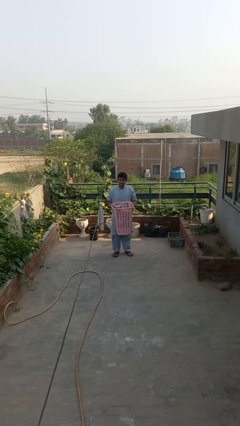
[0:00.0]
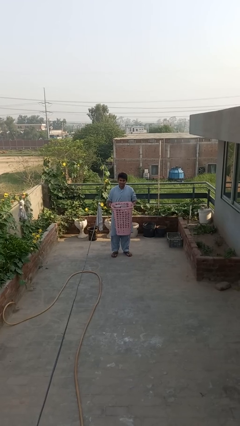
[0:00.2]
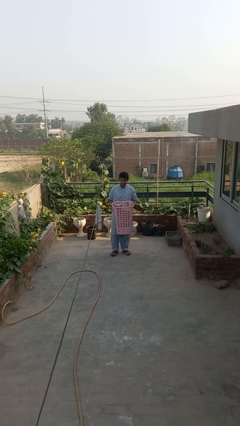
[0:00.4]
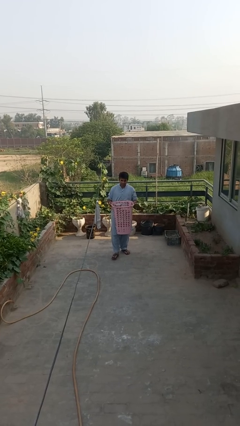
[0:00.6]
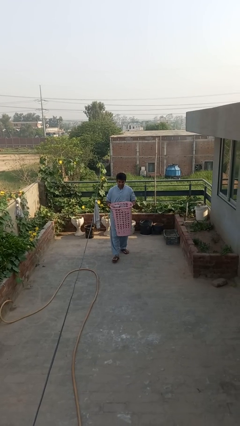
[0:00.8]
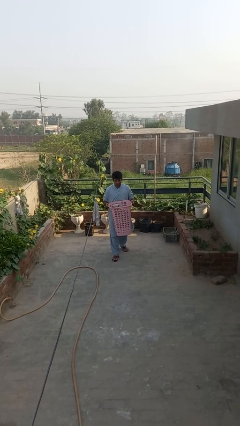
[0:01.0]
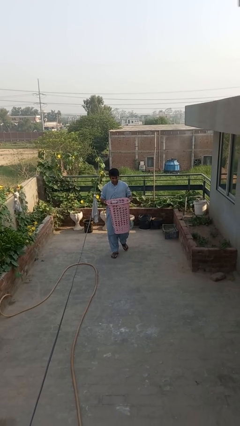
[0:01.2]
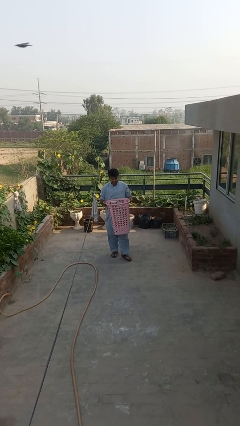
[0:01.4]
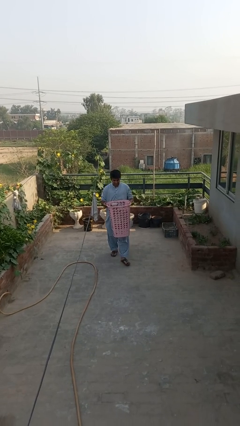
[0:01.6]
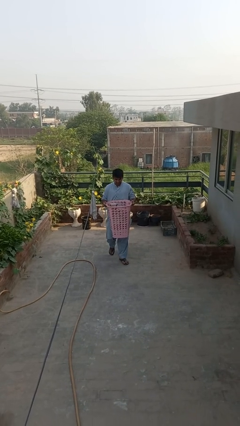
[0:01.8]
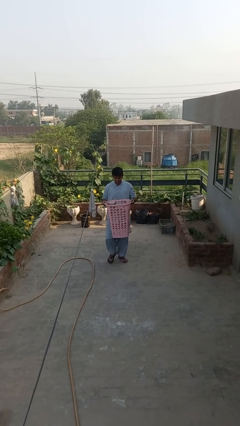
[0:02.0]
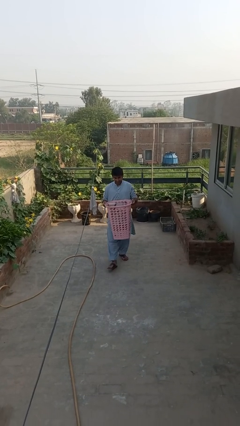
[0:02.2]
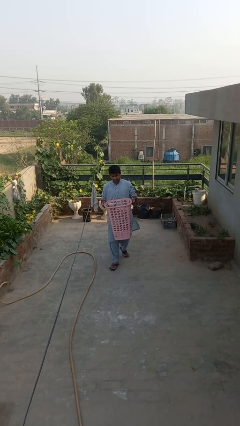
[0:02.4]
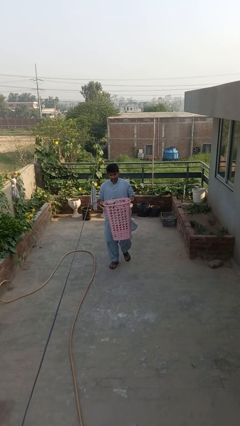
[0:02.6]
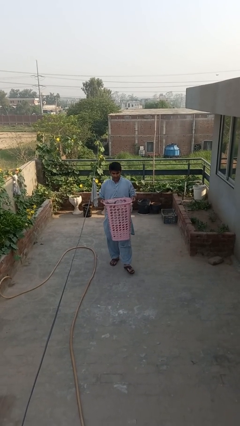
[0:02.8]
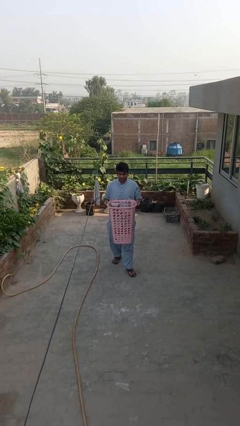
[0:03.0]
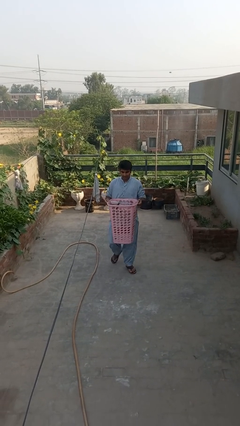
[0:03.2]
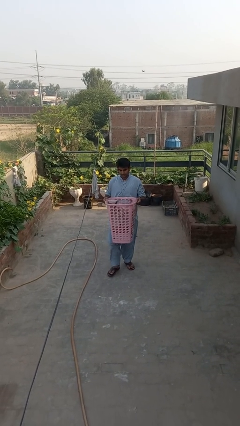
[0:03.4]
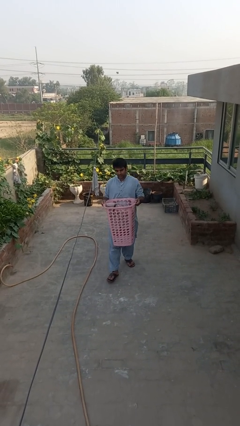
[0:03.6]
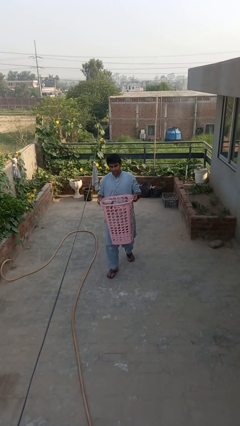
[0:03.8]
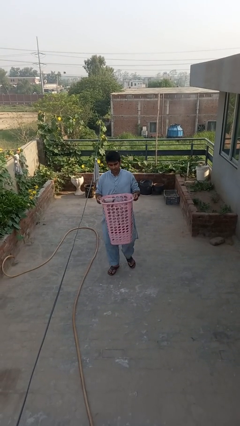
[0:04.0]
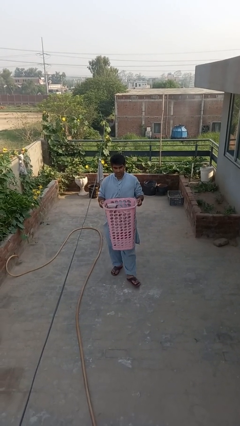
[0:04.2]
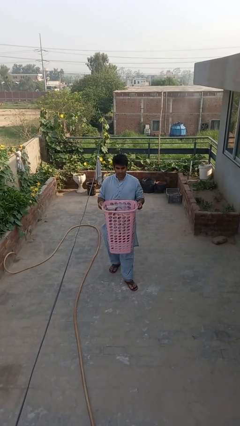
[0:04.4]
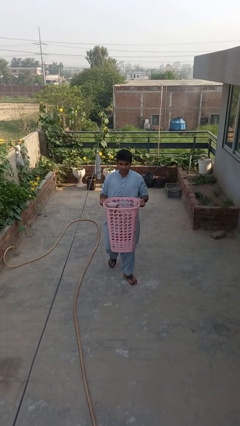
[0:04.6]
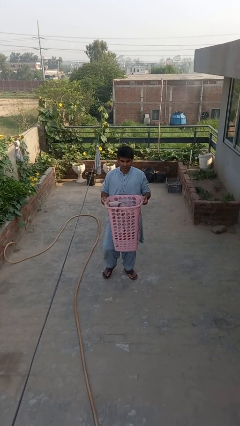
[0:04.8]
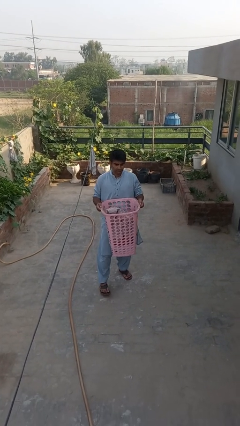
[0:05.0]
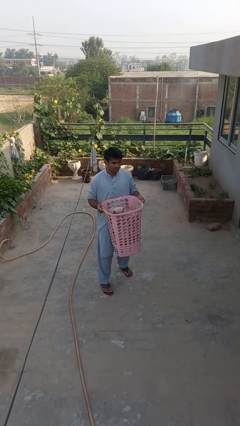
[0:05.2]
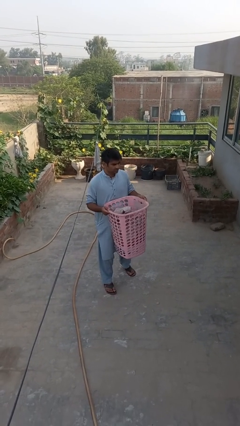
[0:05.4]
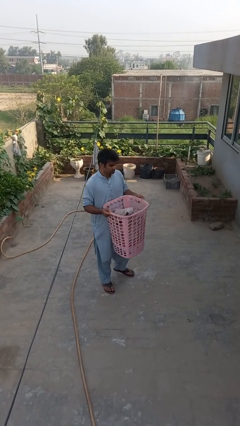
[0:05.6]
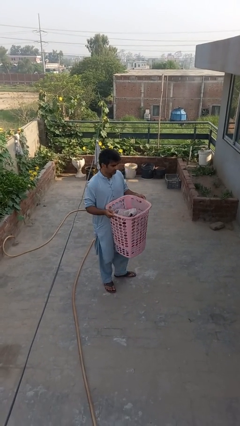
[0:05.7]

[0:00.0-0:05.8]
person carries laundry basket

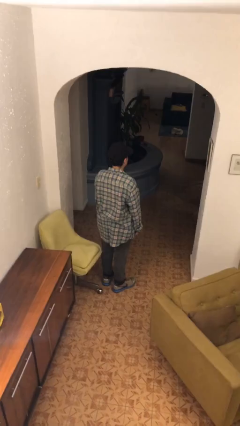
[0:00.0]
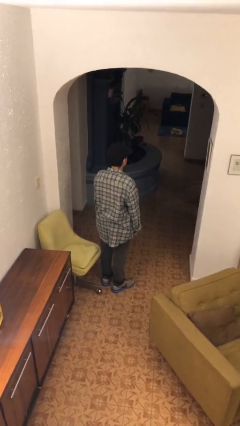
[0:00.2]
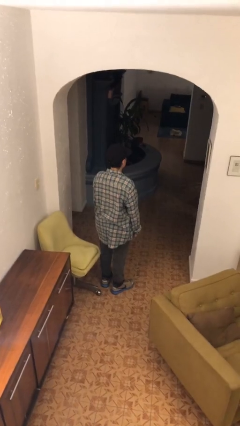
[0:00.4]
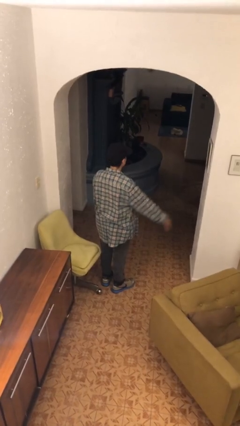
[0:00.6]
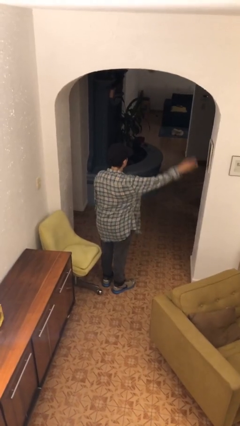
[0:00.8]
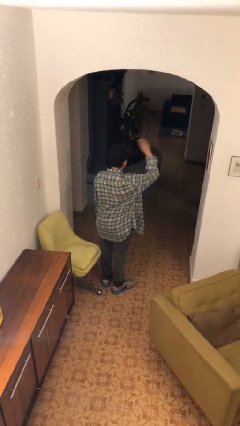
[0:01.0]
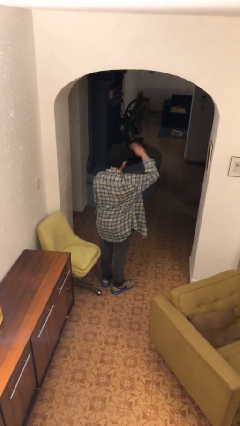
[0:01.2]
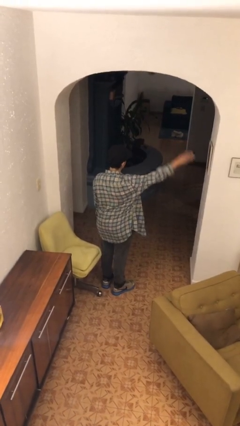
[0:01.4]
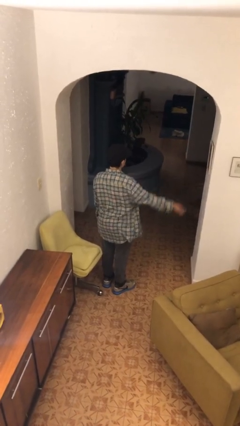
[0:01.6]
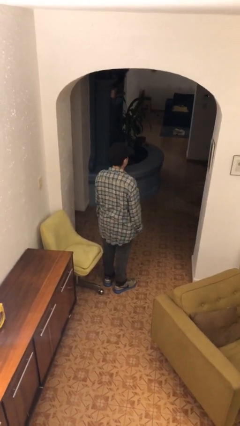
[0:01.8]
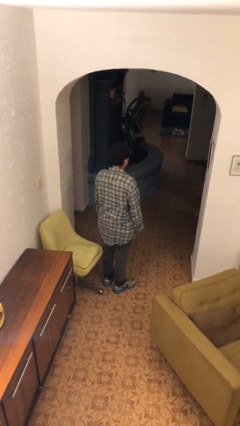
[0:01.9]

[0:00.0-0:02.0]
person salutes

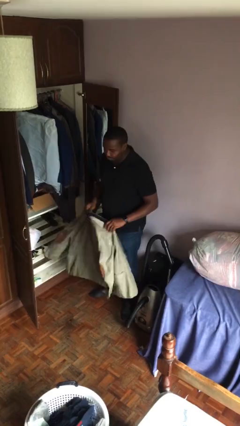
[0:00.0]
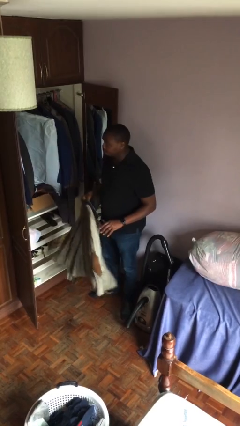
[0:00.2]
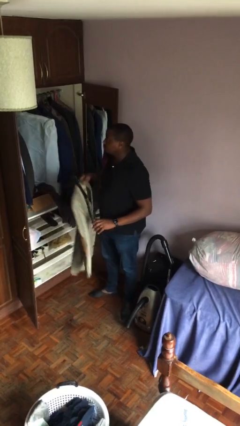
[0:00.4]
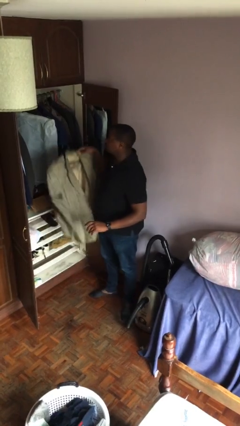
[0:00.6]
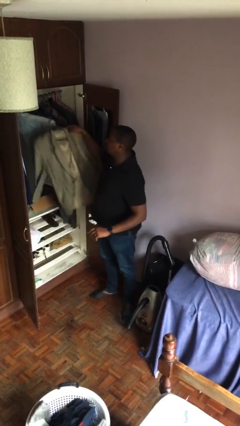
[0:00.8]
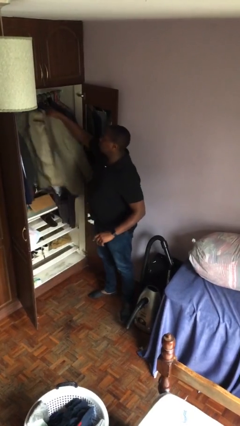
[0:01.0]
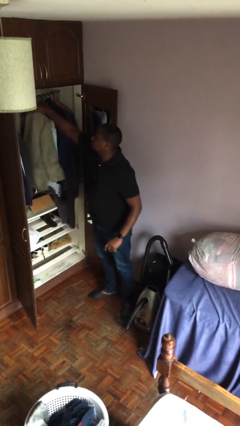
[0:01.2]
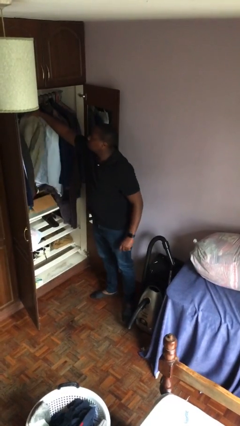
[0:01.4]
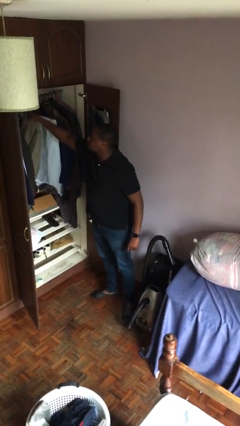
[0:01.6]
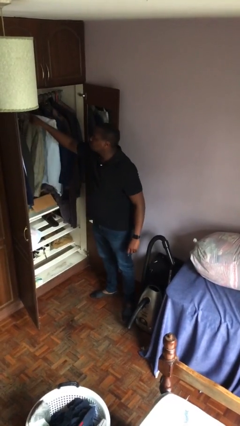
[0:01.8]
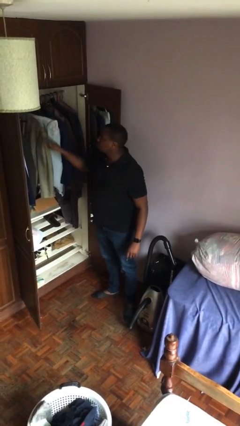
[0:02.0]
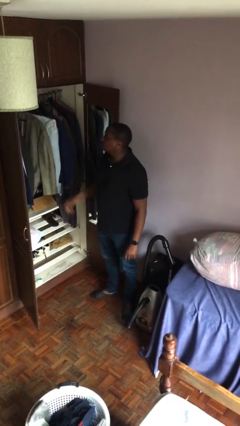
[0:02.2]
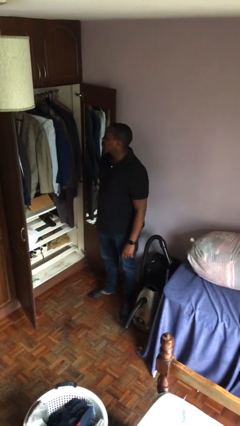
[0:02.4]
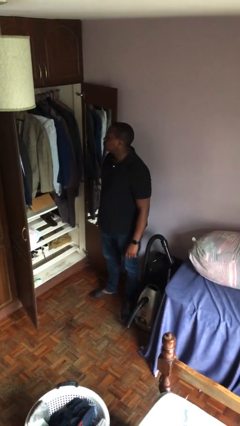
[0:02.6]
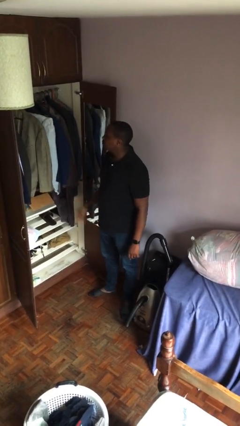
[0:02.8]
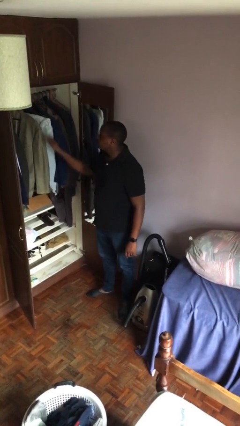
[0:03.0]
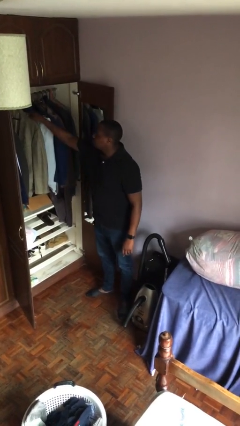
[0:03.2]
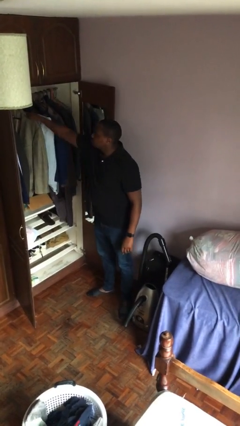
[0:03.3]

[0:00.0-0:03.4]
person puts clothes into closet

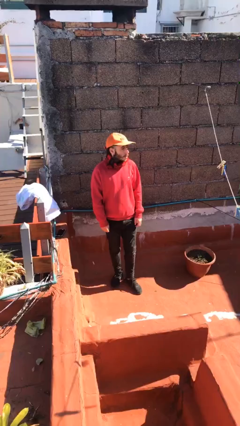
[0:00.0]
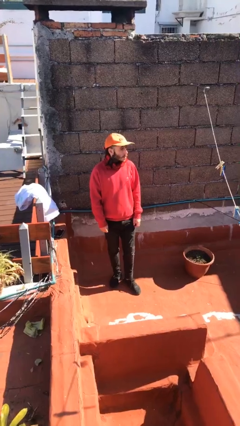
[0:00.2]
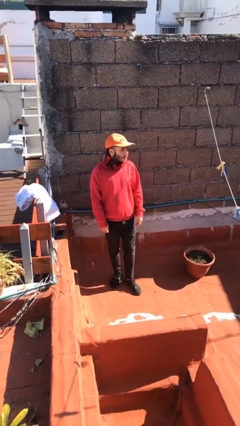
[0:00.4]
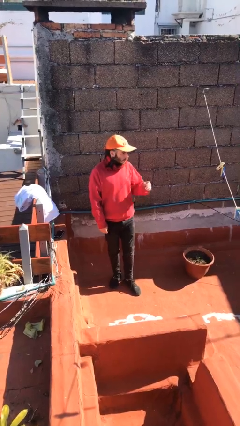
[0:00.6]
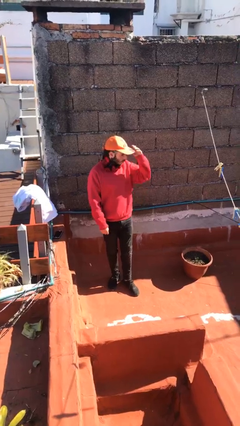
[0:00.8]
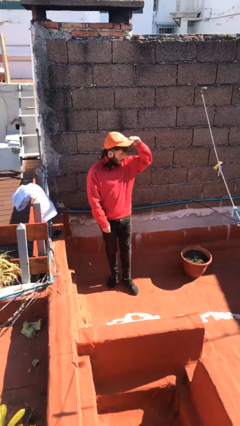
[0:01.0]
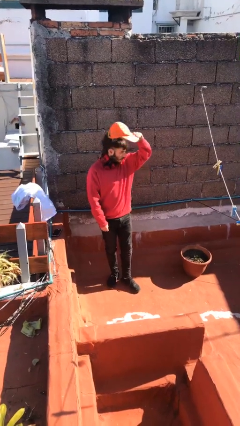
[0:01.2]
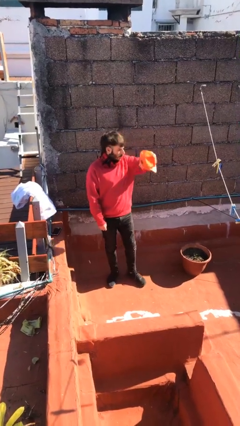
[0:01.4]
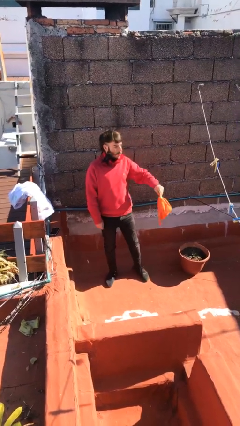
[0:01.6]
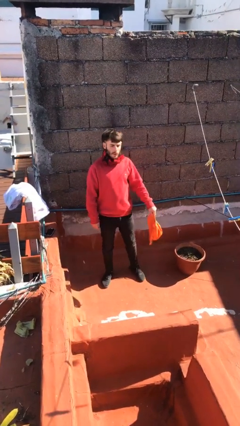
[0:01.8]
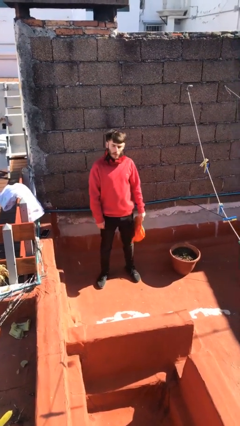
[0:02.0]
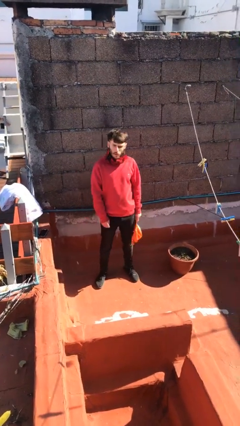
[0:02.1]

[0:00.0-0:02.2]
person takes off hat

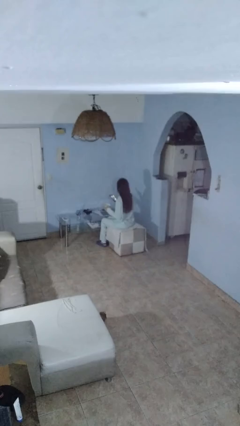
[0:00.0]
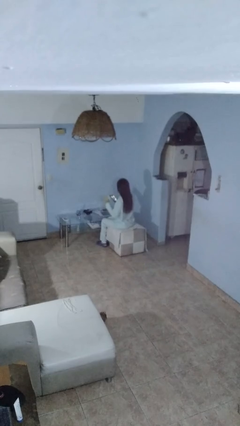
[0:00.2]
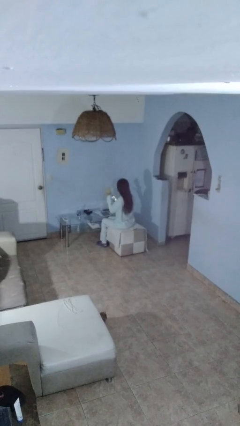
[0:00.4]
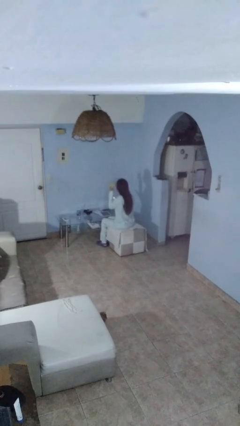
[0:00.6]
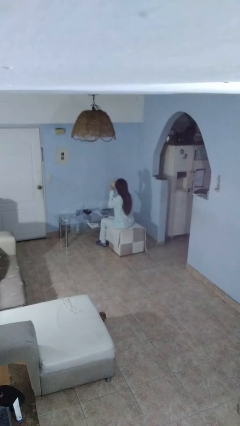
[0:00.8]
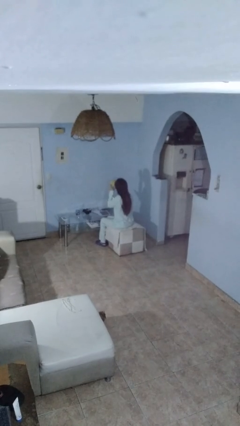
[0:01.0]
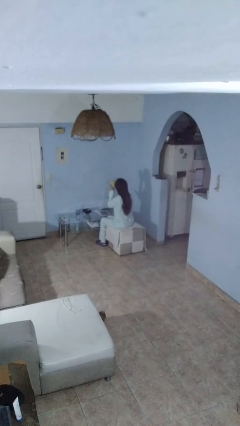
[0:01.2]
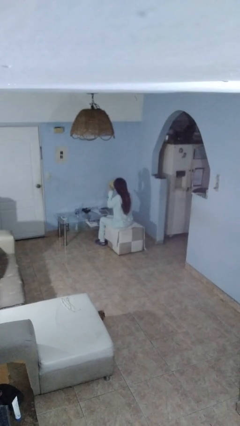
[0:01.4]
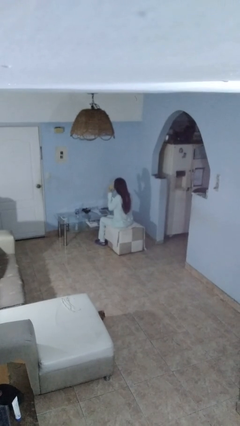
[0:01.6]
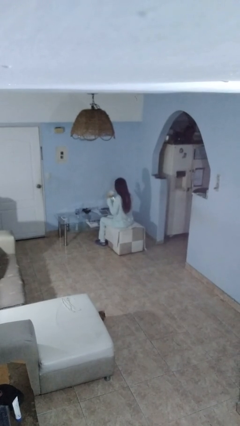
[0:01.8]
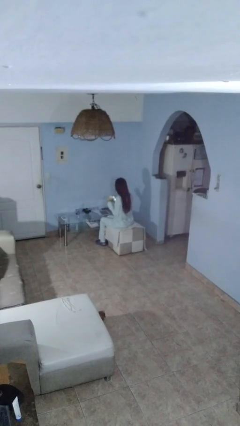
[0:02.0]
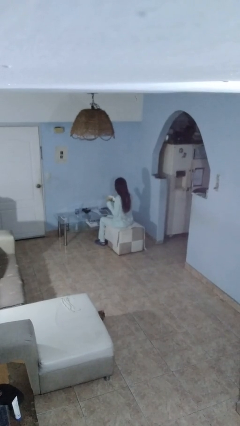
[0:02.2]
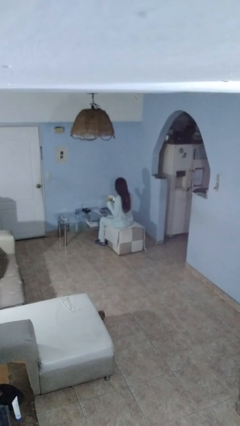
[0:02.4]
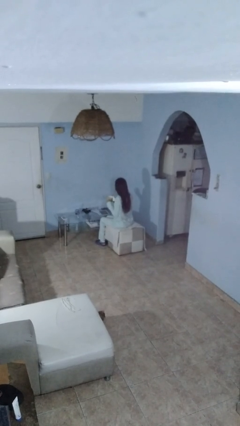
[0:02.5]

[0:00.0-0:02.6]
person drinks from mug

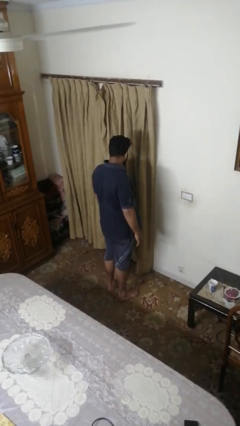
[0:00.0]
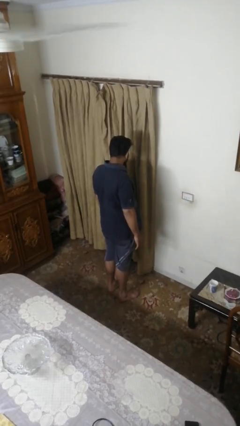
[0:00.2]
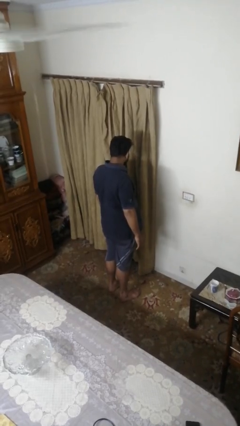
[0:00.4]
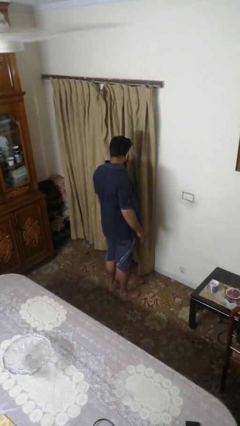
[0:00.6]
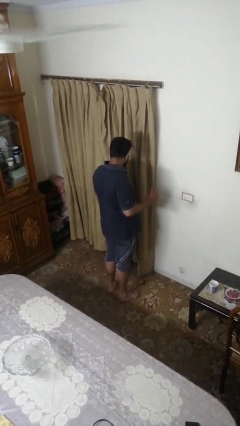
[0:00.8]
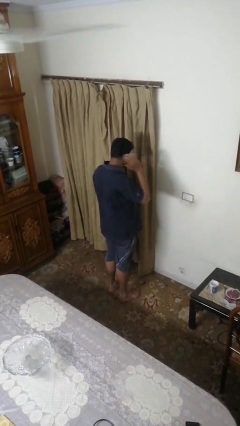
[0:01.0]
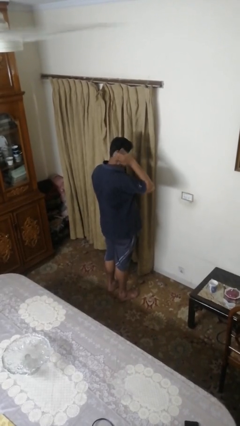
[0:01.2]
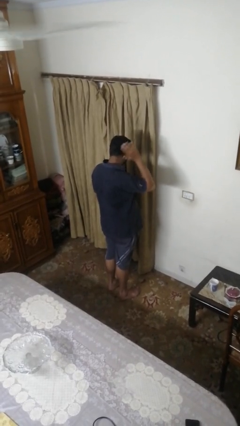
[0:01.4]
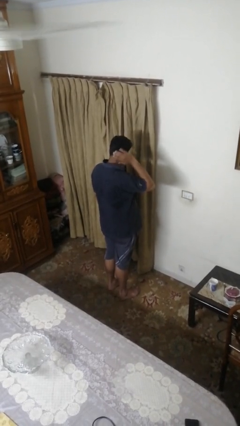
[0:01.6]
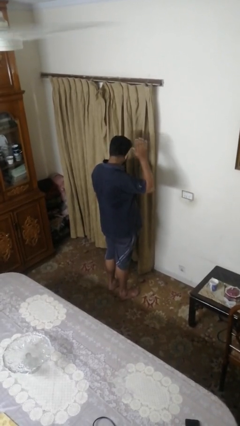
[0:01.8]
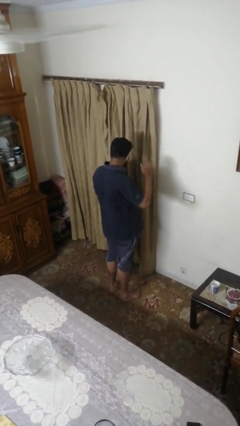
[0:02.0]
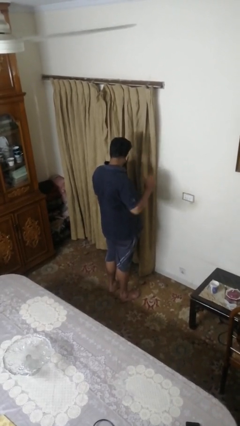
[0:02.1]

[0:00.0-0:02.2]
person strokes hair
